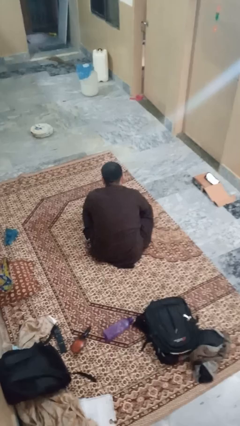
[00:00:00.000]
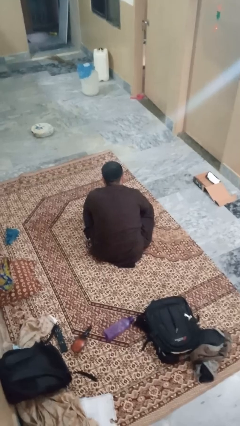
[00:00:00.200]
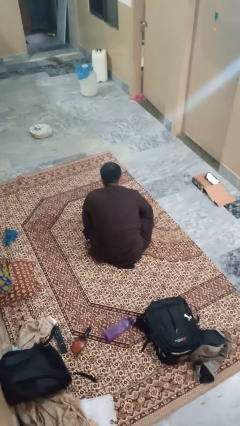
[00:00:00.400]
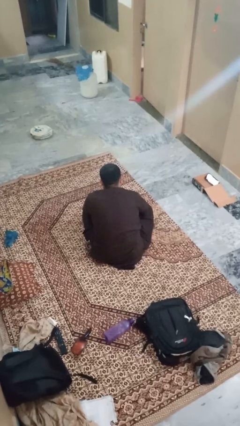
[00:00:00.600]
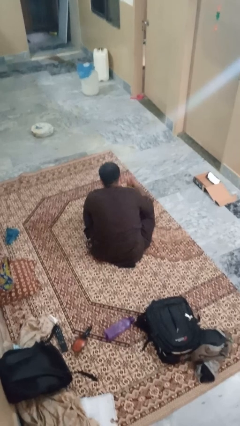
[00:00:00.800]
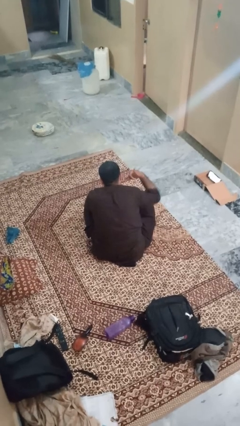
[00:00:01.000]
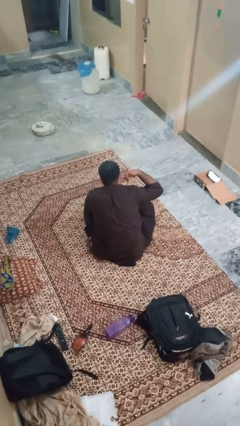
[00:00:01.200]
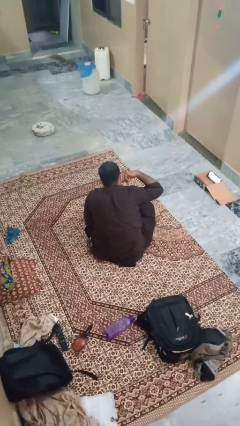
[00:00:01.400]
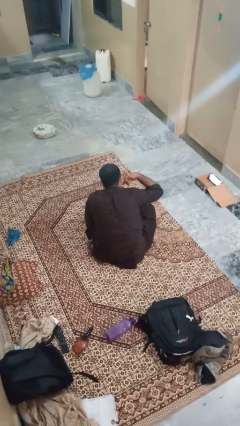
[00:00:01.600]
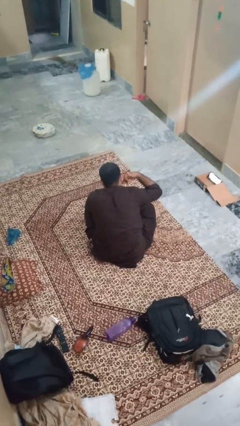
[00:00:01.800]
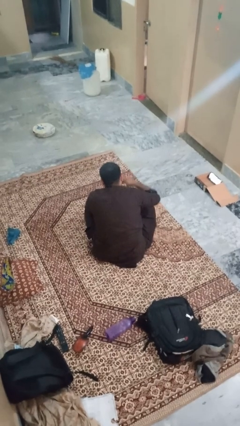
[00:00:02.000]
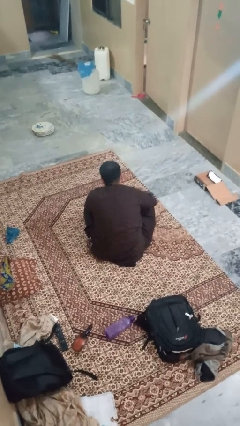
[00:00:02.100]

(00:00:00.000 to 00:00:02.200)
person gestures call me

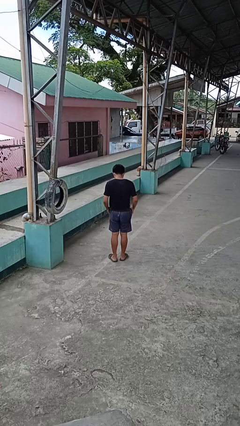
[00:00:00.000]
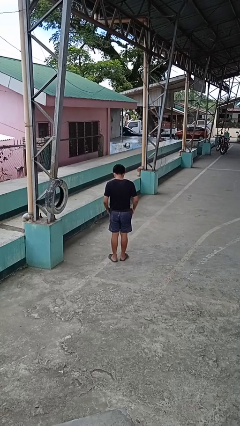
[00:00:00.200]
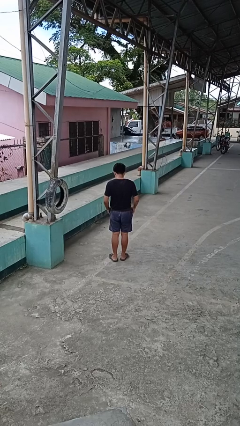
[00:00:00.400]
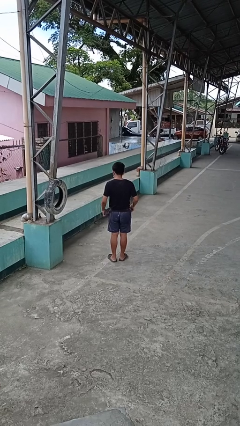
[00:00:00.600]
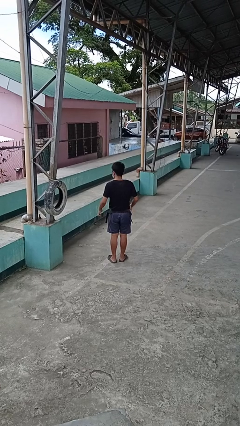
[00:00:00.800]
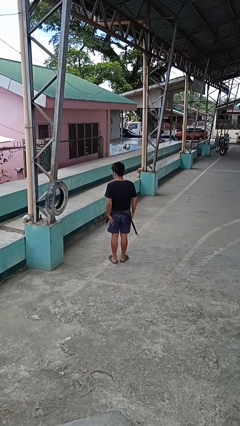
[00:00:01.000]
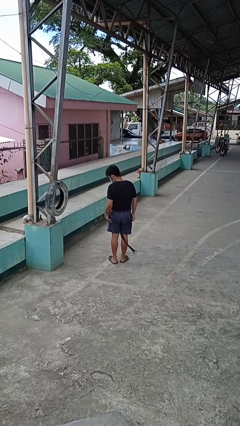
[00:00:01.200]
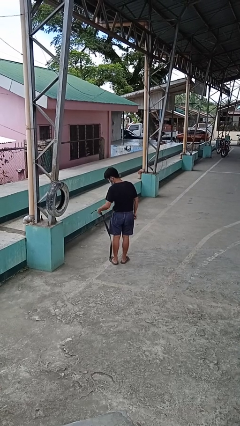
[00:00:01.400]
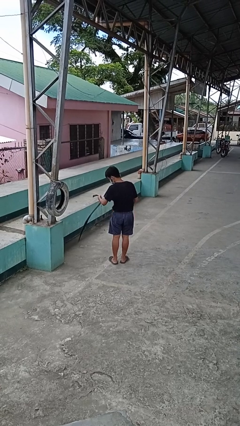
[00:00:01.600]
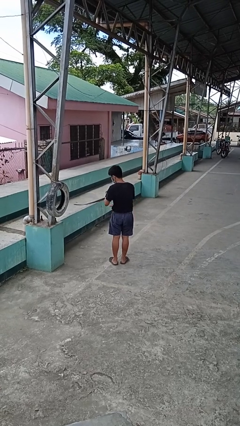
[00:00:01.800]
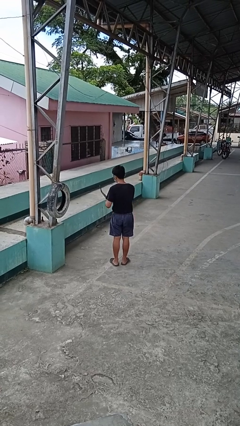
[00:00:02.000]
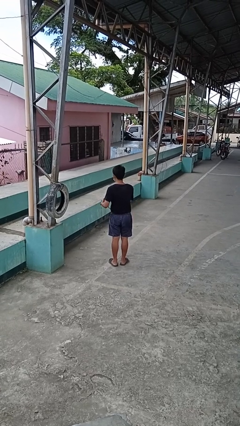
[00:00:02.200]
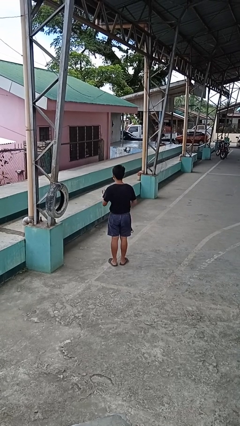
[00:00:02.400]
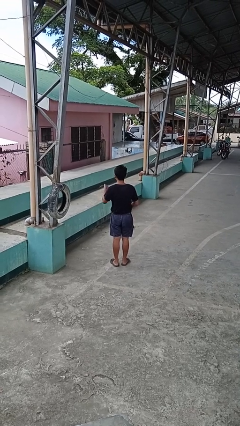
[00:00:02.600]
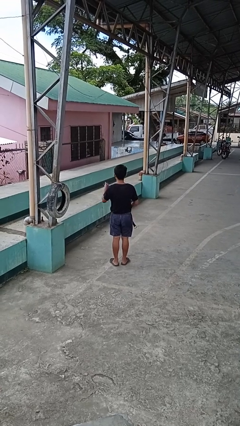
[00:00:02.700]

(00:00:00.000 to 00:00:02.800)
person takes off belt

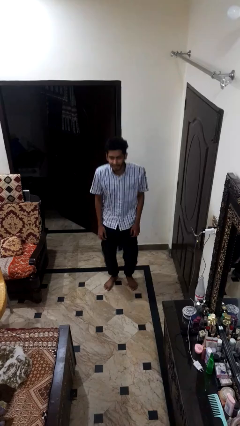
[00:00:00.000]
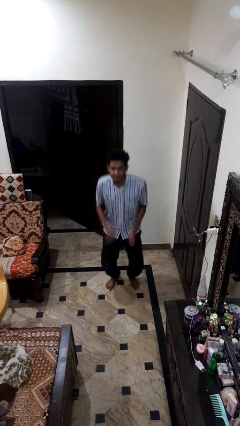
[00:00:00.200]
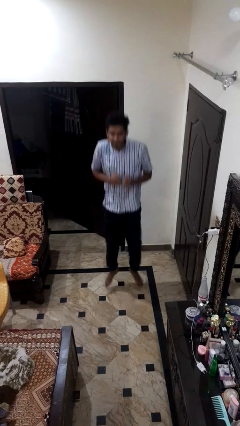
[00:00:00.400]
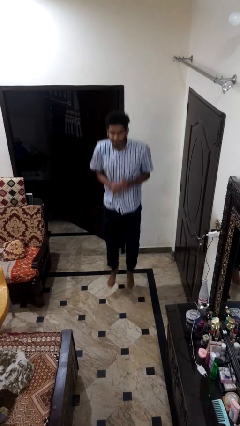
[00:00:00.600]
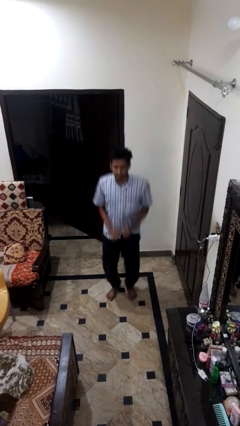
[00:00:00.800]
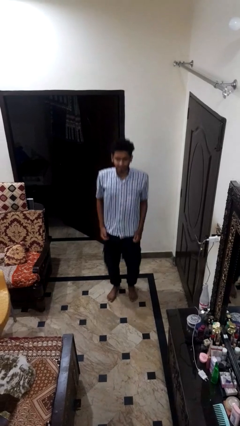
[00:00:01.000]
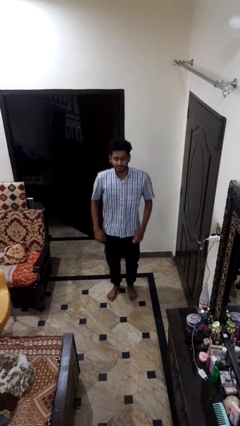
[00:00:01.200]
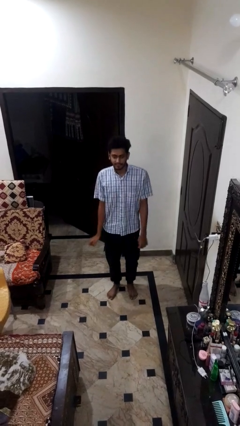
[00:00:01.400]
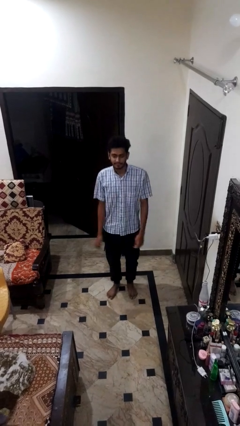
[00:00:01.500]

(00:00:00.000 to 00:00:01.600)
person jumps

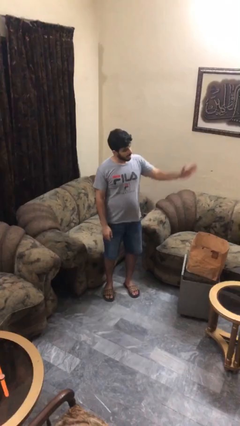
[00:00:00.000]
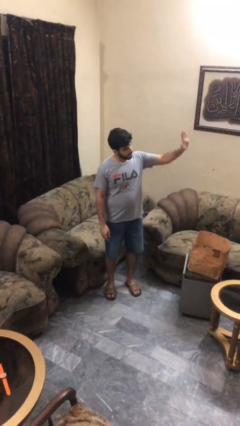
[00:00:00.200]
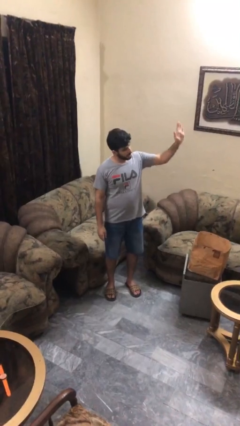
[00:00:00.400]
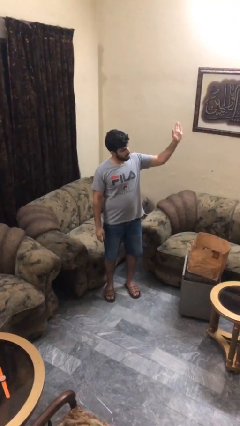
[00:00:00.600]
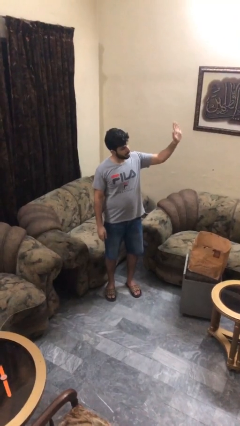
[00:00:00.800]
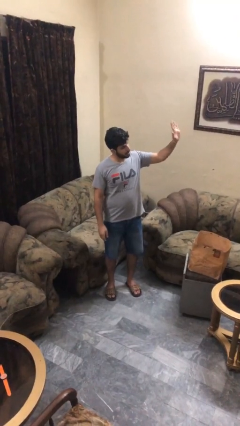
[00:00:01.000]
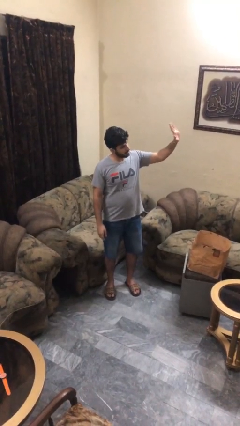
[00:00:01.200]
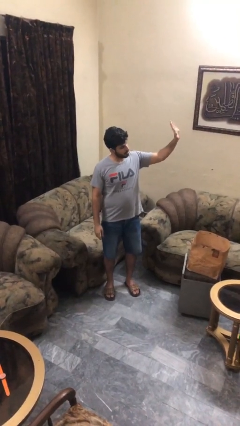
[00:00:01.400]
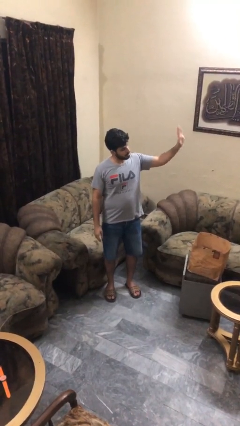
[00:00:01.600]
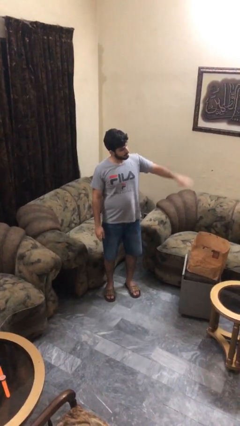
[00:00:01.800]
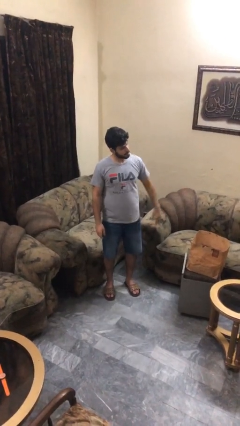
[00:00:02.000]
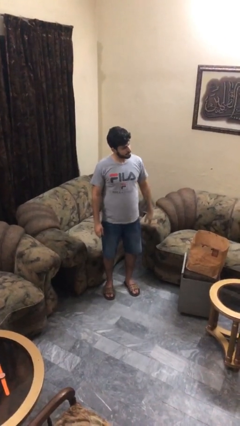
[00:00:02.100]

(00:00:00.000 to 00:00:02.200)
person waves at person

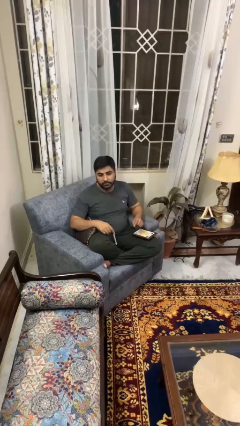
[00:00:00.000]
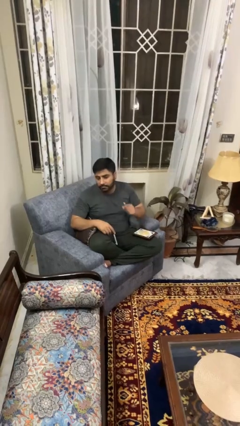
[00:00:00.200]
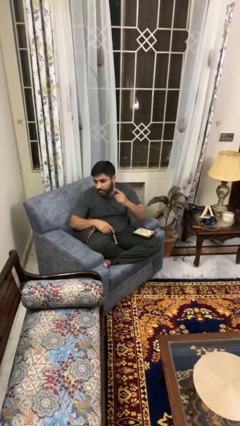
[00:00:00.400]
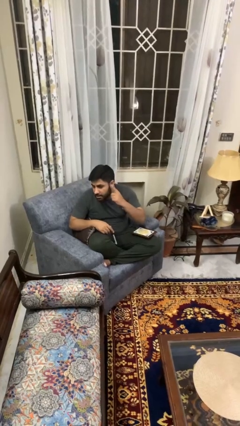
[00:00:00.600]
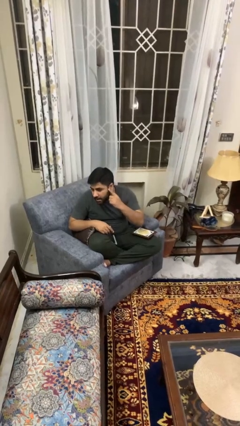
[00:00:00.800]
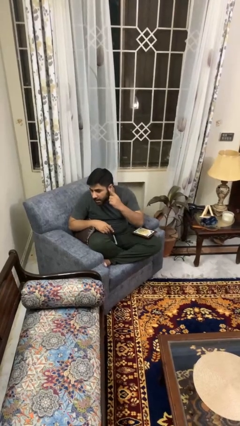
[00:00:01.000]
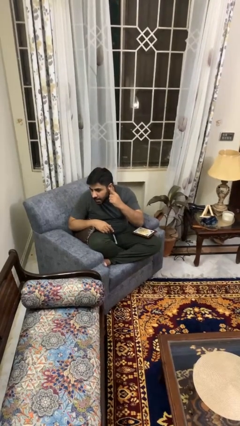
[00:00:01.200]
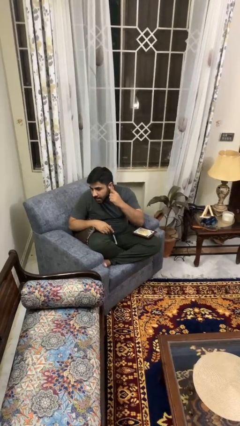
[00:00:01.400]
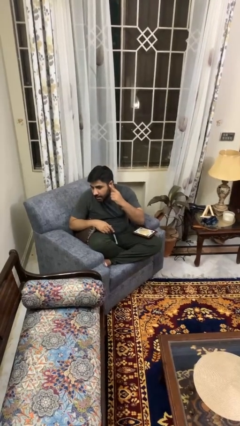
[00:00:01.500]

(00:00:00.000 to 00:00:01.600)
person gestures listen closely

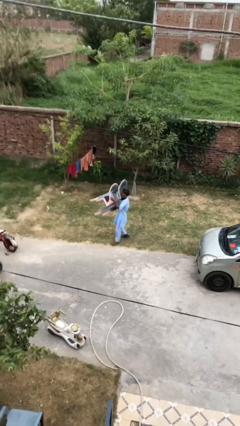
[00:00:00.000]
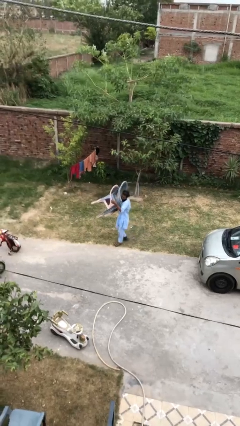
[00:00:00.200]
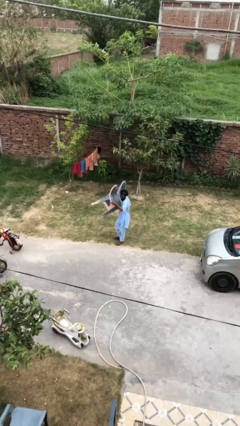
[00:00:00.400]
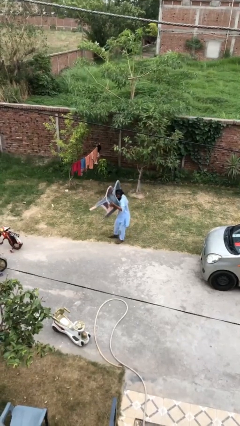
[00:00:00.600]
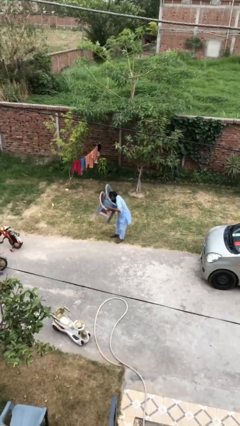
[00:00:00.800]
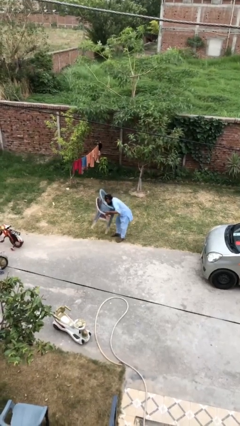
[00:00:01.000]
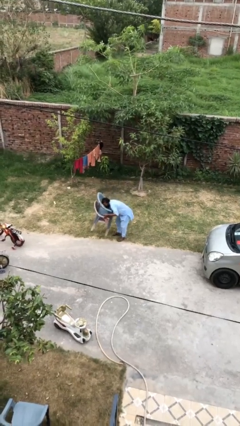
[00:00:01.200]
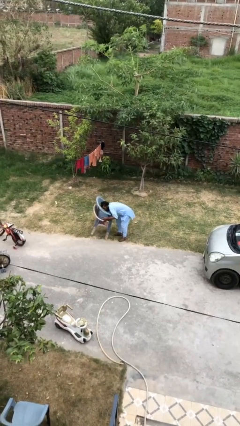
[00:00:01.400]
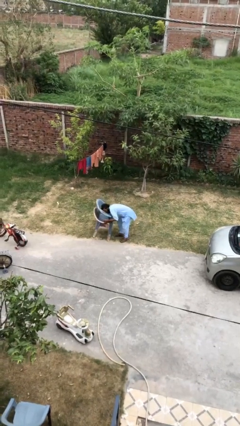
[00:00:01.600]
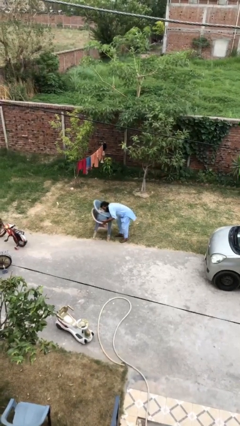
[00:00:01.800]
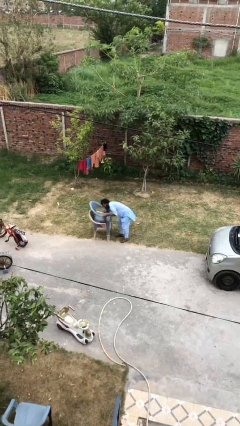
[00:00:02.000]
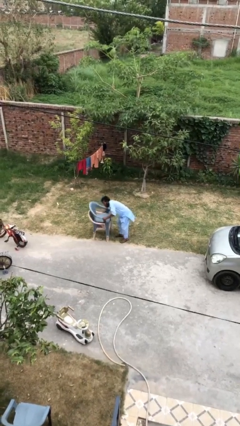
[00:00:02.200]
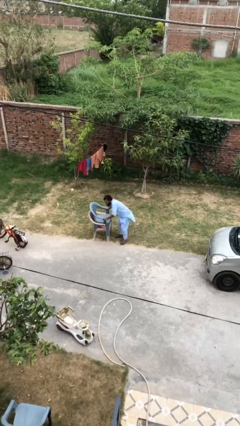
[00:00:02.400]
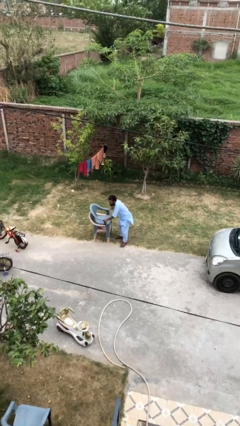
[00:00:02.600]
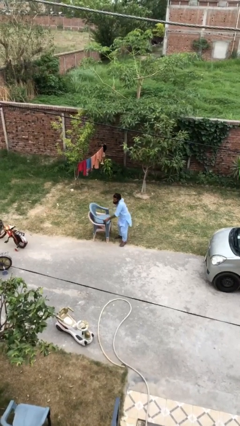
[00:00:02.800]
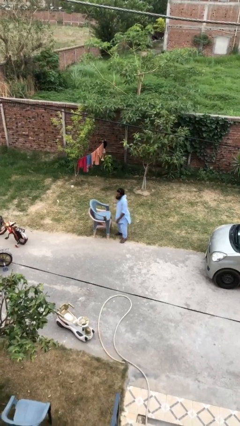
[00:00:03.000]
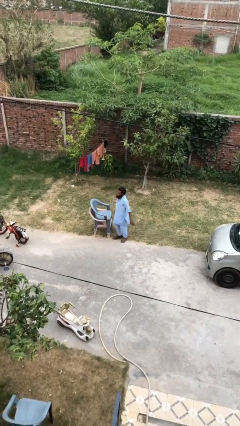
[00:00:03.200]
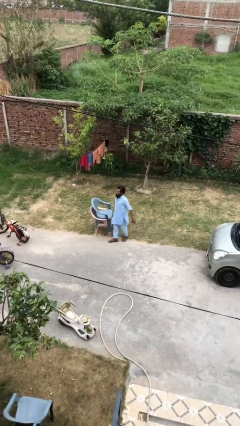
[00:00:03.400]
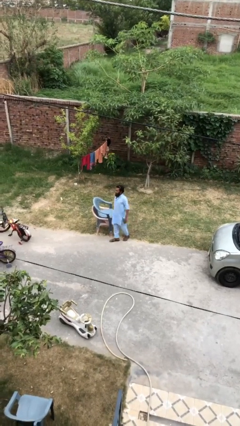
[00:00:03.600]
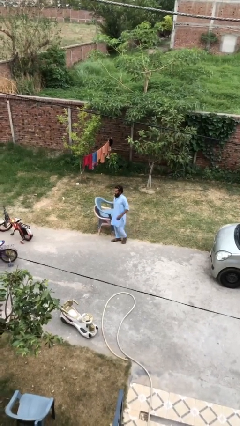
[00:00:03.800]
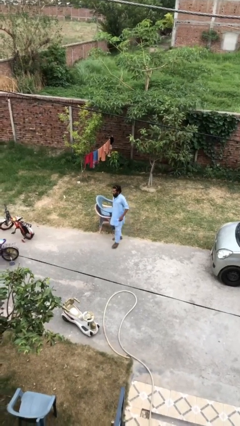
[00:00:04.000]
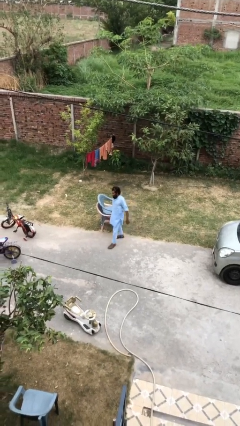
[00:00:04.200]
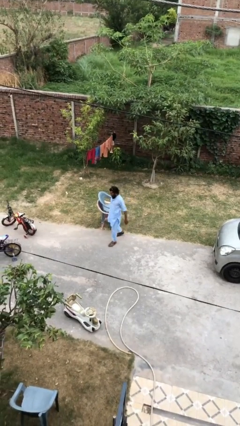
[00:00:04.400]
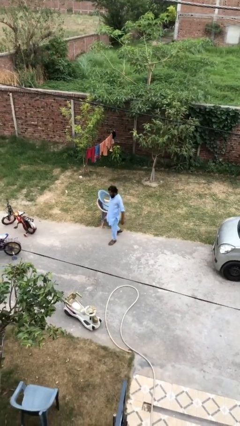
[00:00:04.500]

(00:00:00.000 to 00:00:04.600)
person puts down object on floor

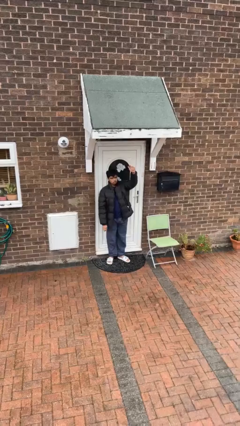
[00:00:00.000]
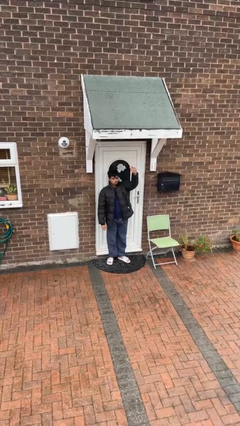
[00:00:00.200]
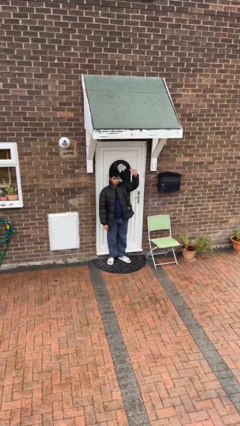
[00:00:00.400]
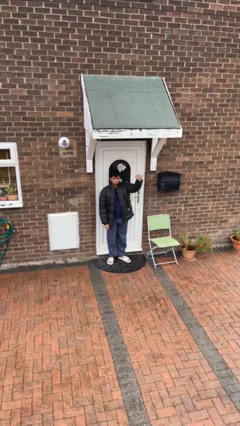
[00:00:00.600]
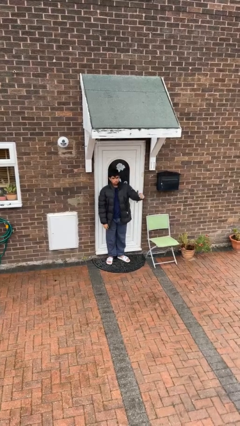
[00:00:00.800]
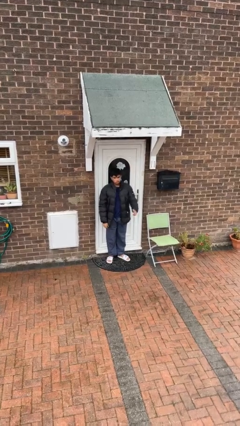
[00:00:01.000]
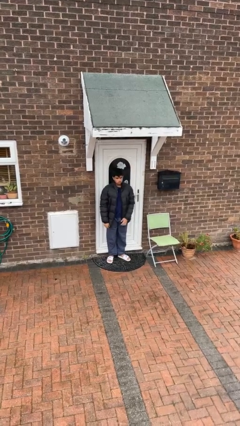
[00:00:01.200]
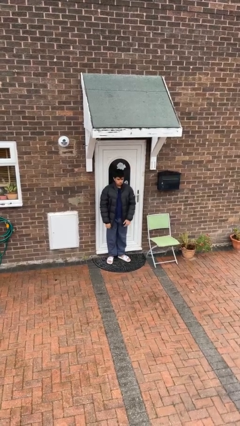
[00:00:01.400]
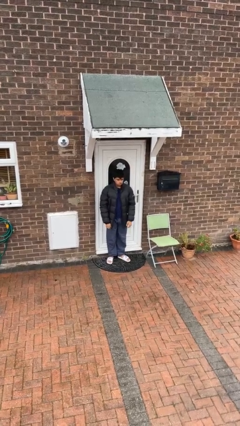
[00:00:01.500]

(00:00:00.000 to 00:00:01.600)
person gestures lower hand

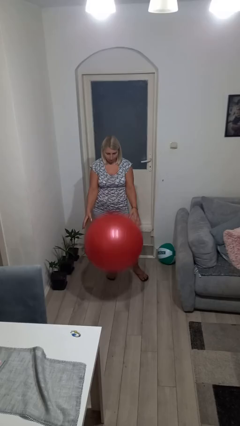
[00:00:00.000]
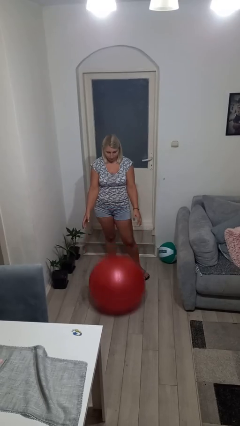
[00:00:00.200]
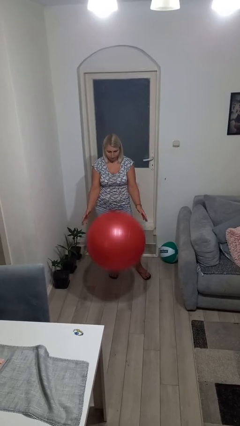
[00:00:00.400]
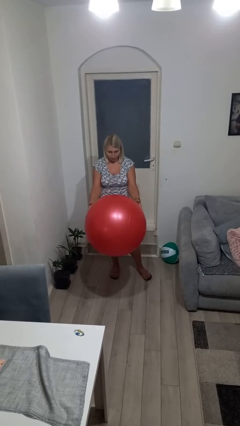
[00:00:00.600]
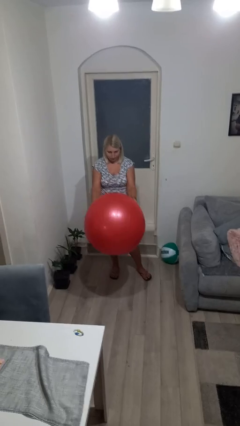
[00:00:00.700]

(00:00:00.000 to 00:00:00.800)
person bounces ball on floor
